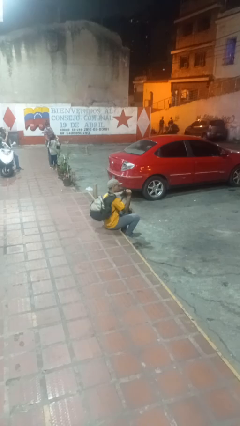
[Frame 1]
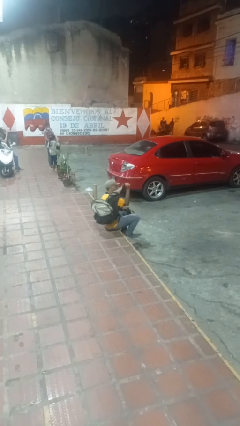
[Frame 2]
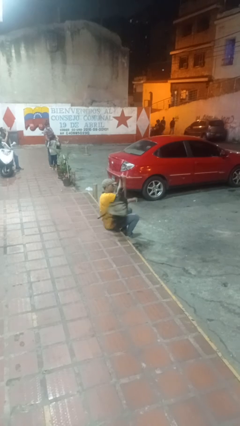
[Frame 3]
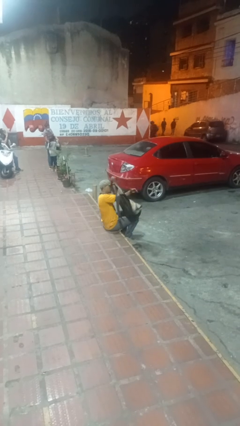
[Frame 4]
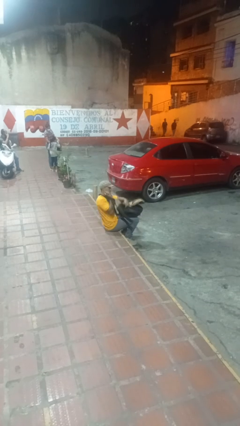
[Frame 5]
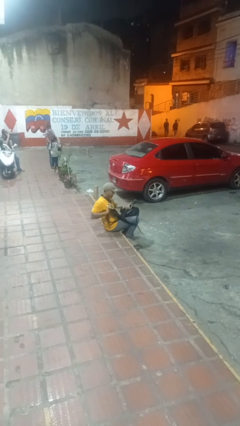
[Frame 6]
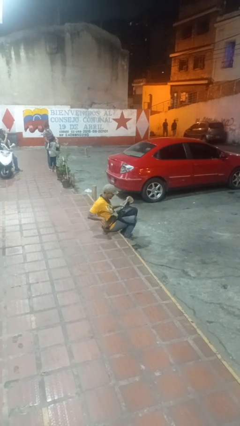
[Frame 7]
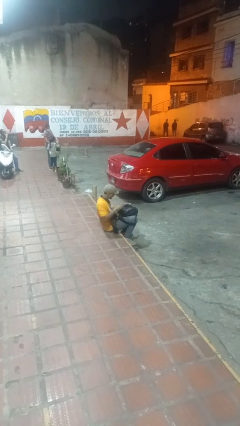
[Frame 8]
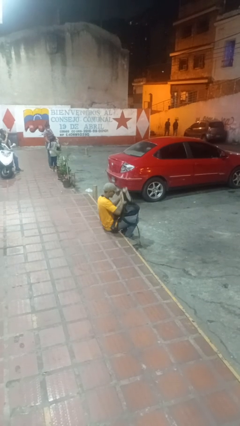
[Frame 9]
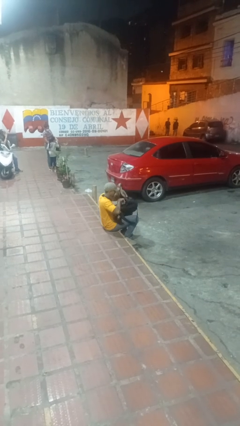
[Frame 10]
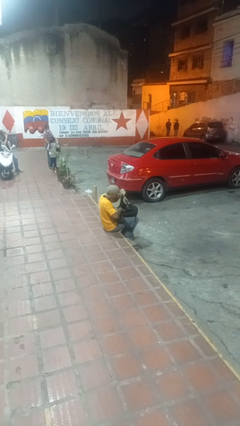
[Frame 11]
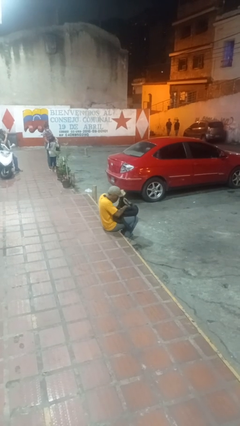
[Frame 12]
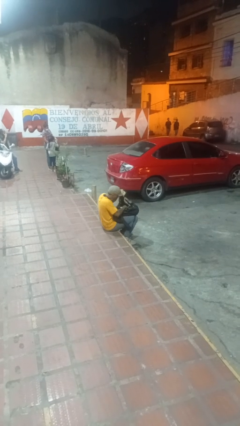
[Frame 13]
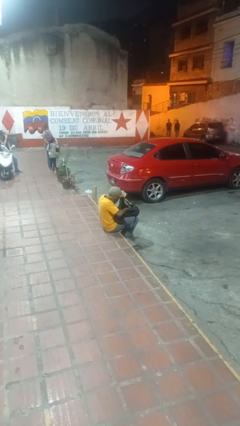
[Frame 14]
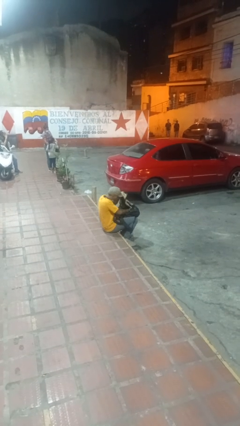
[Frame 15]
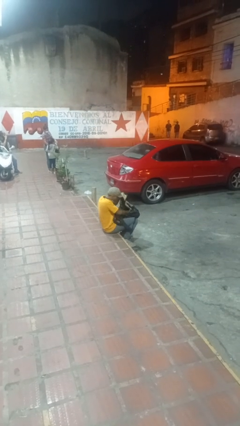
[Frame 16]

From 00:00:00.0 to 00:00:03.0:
person searches in backpack

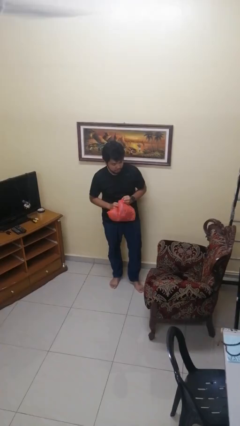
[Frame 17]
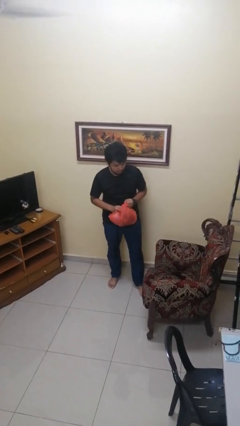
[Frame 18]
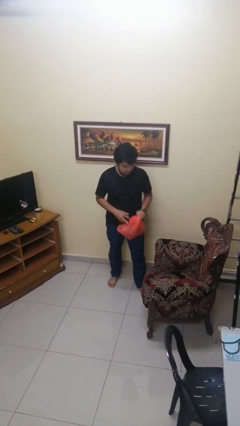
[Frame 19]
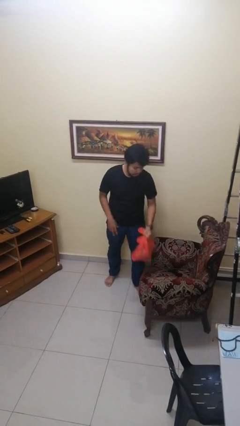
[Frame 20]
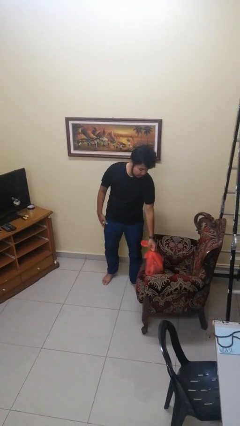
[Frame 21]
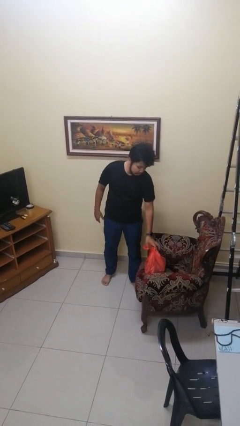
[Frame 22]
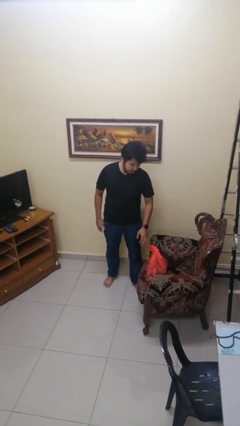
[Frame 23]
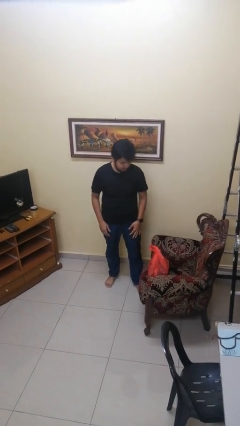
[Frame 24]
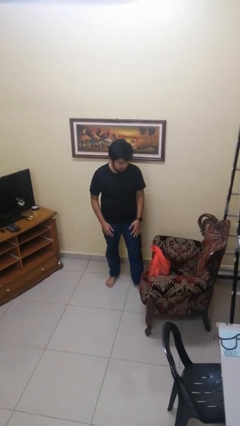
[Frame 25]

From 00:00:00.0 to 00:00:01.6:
person puts down object on couch

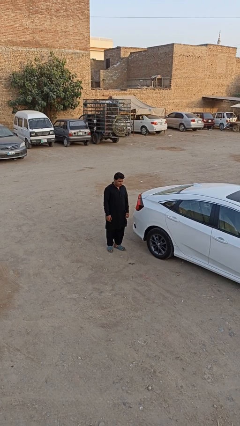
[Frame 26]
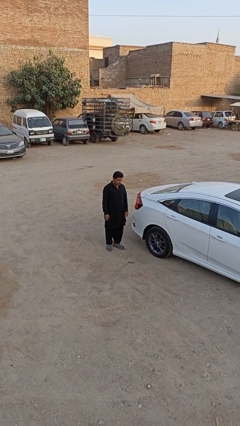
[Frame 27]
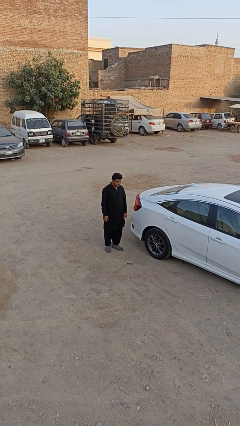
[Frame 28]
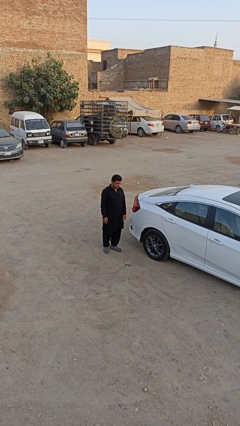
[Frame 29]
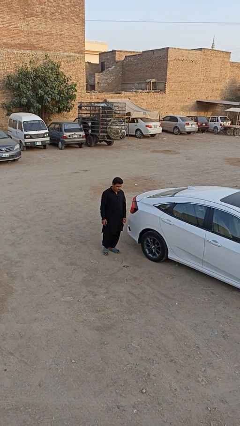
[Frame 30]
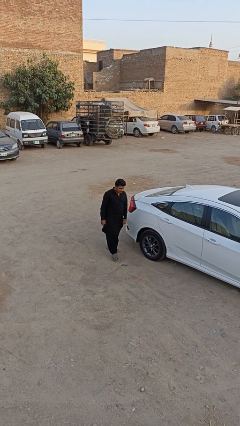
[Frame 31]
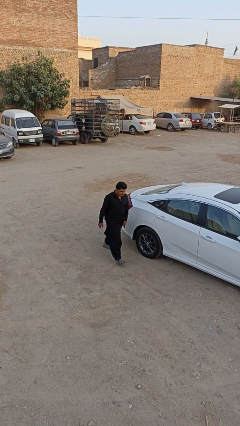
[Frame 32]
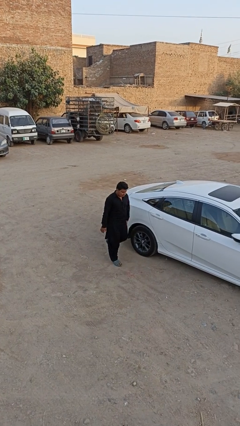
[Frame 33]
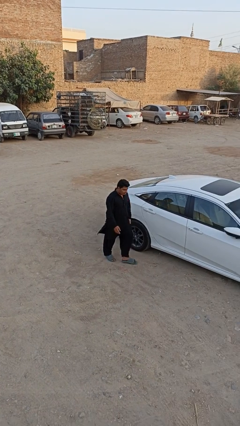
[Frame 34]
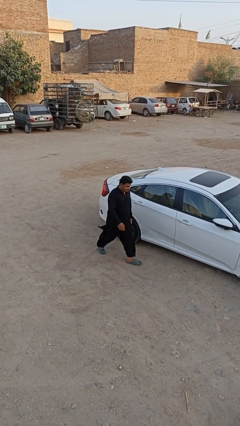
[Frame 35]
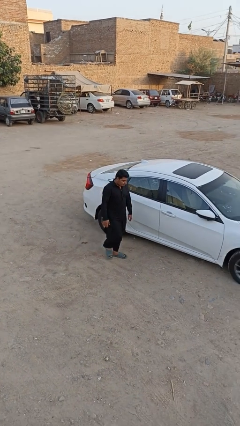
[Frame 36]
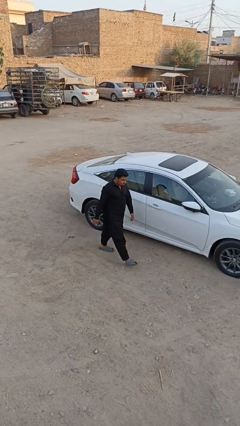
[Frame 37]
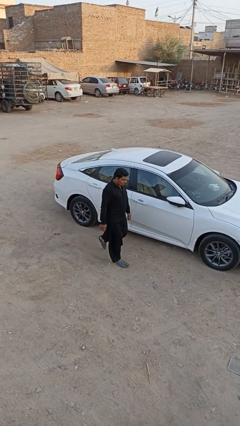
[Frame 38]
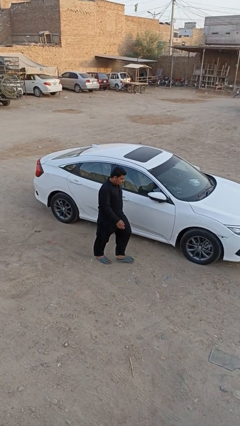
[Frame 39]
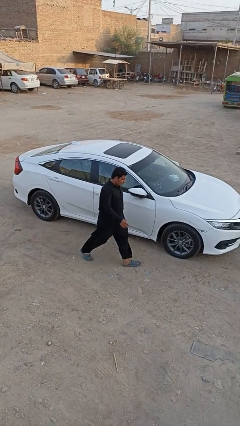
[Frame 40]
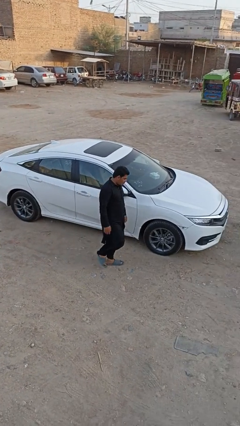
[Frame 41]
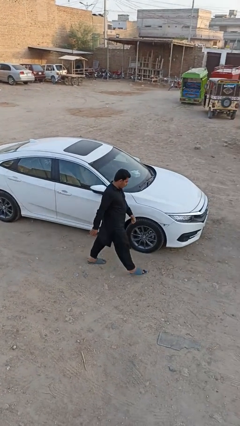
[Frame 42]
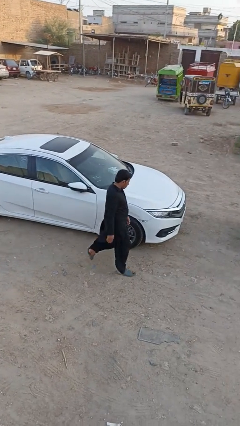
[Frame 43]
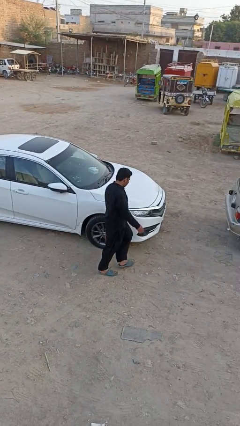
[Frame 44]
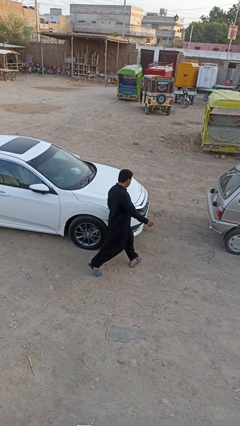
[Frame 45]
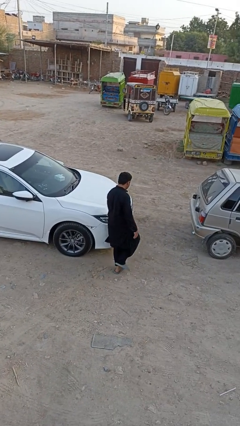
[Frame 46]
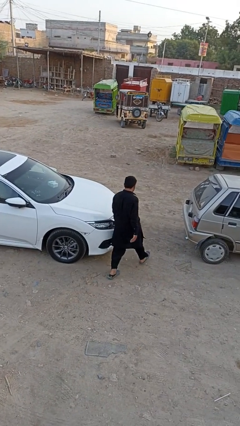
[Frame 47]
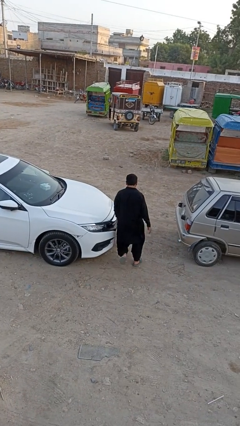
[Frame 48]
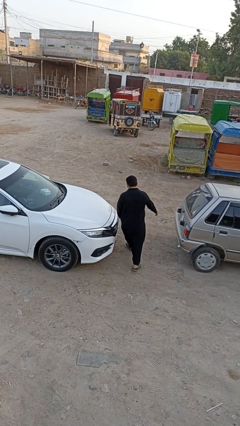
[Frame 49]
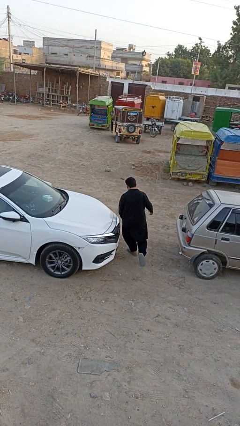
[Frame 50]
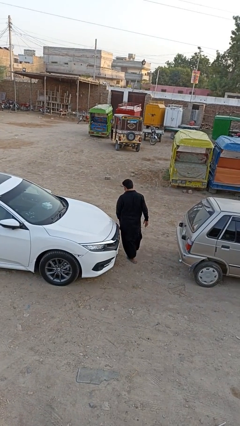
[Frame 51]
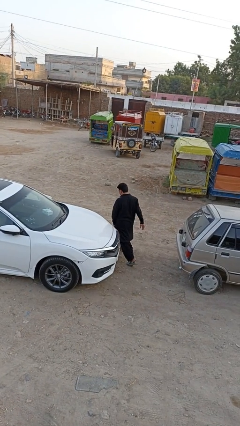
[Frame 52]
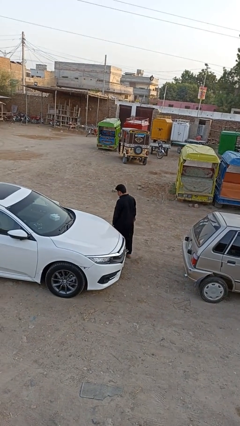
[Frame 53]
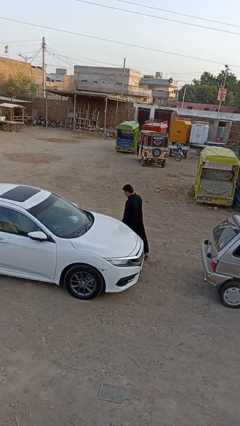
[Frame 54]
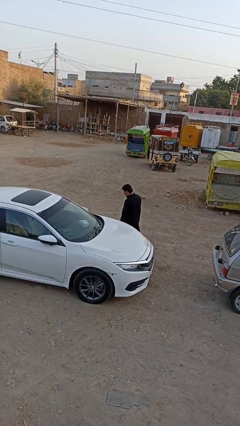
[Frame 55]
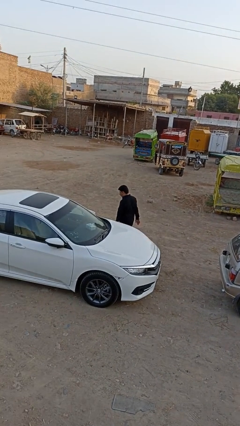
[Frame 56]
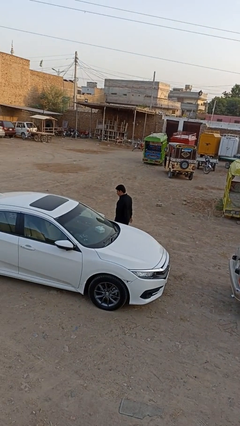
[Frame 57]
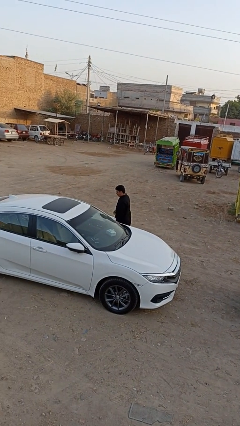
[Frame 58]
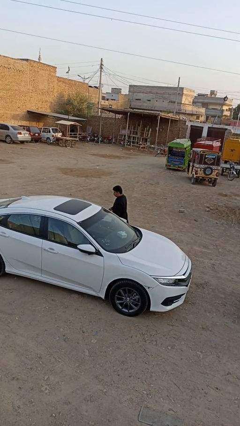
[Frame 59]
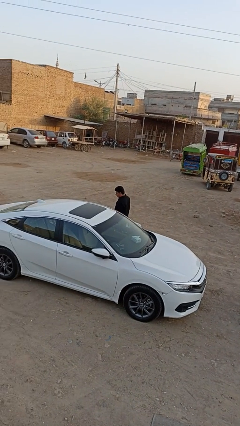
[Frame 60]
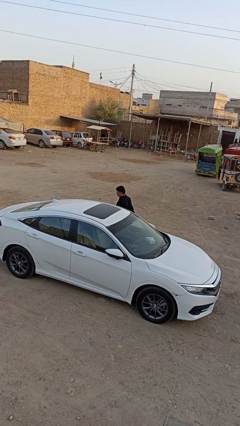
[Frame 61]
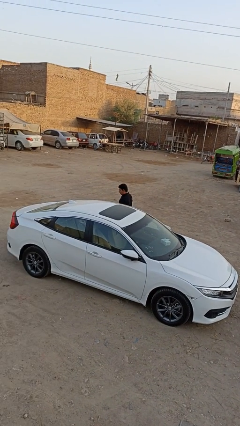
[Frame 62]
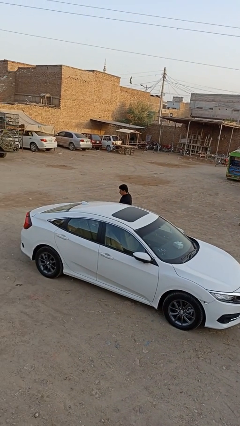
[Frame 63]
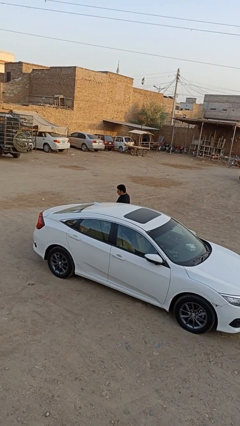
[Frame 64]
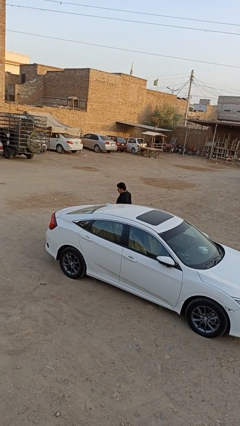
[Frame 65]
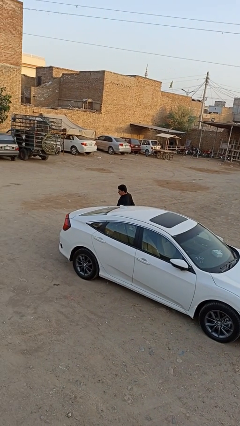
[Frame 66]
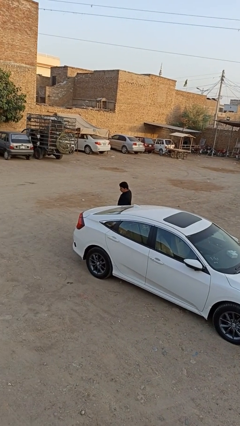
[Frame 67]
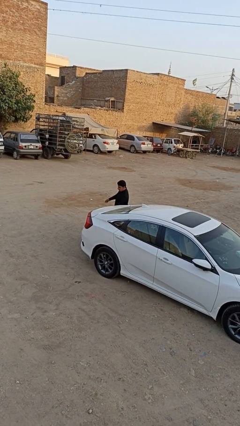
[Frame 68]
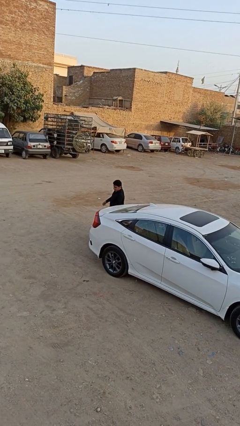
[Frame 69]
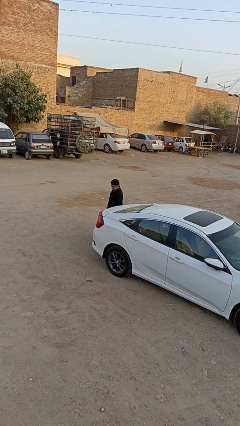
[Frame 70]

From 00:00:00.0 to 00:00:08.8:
person walks around car

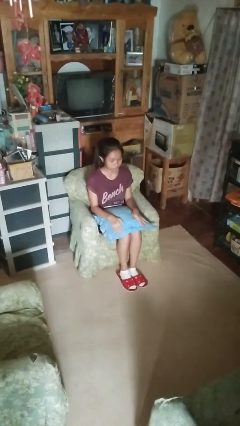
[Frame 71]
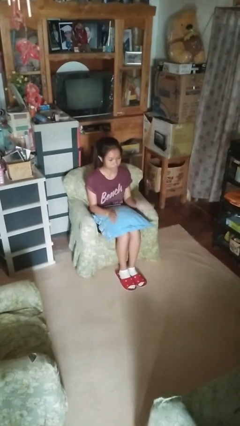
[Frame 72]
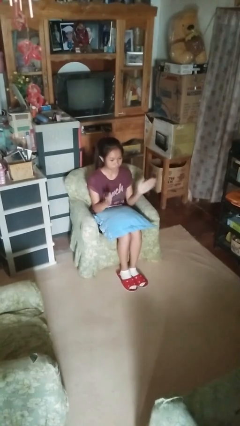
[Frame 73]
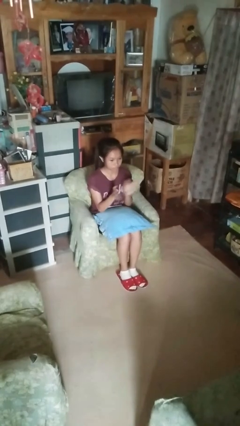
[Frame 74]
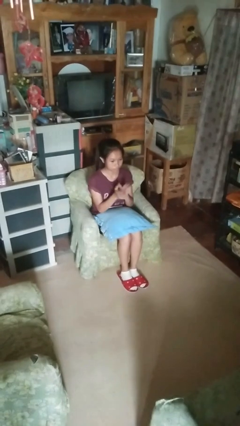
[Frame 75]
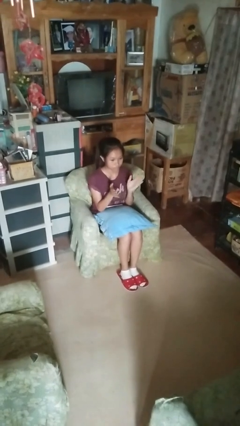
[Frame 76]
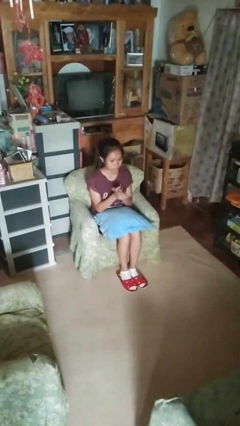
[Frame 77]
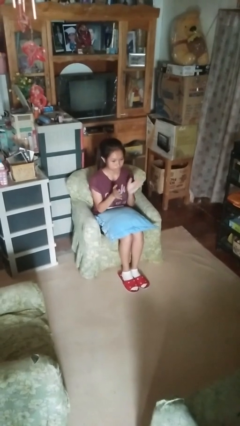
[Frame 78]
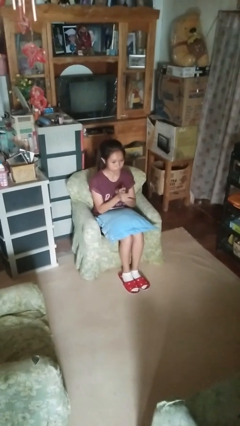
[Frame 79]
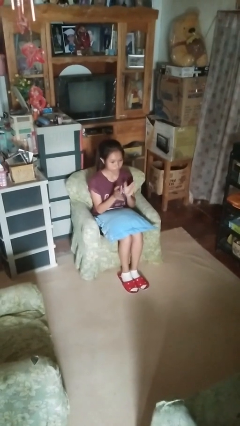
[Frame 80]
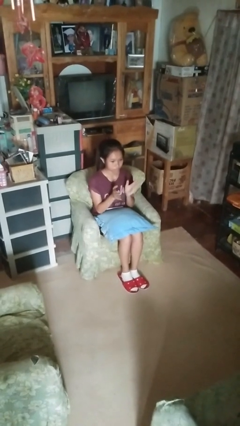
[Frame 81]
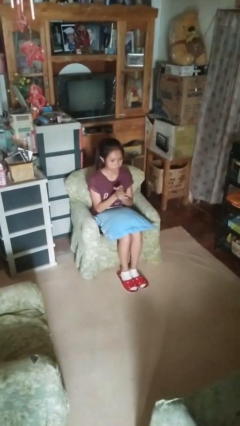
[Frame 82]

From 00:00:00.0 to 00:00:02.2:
person claps hands

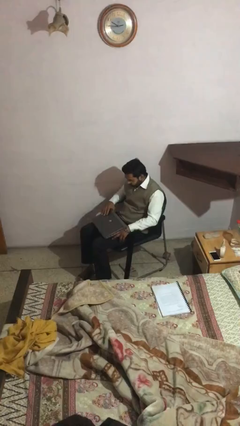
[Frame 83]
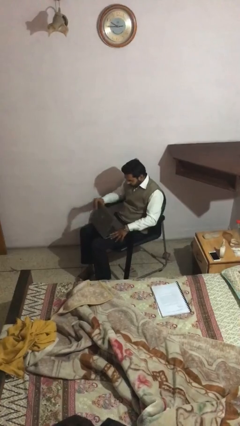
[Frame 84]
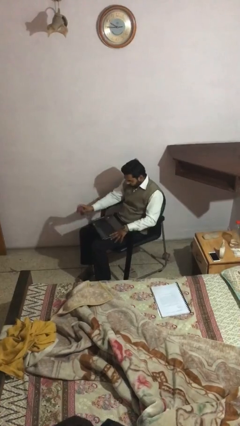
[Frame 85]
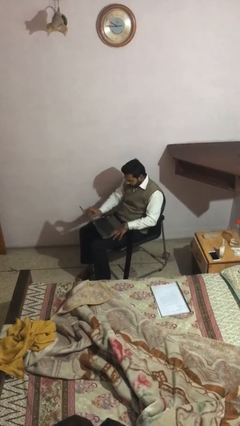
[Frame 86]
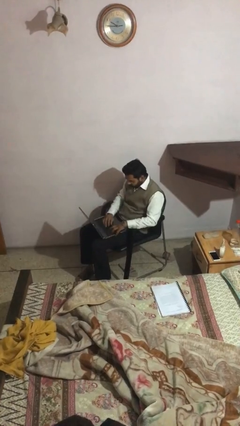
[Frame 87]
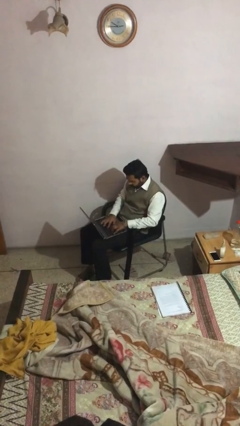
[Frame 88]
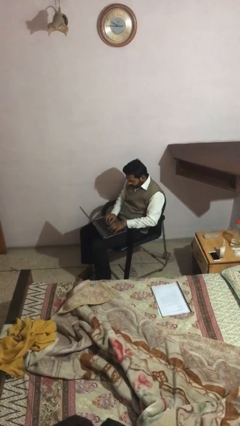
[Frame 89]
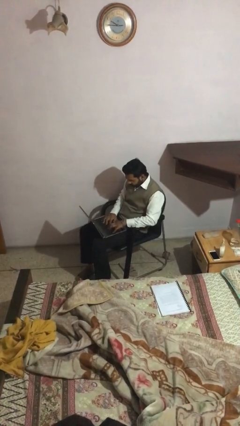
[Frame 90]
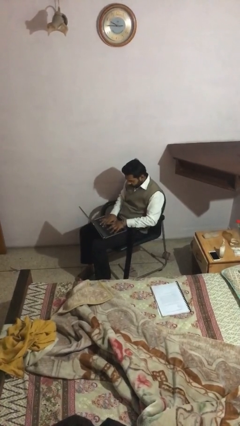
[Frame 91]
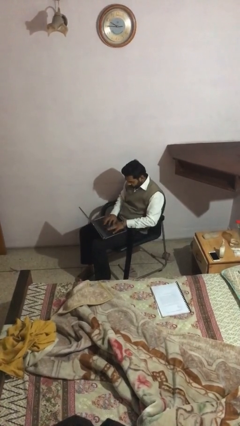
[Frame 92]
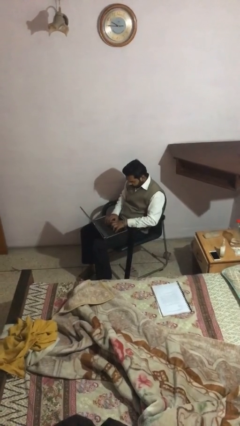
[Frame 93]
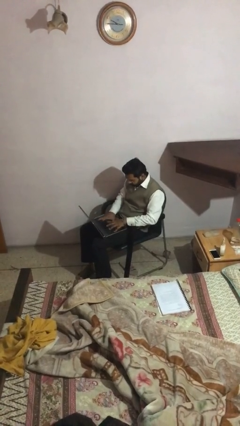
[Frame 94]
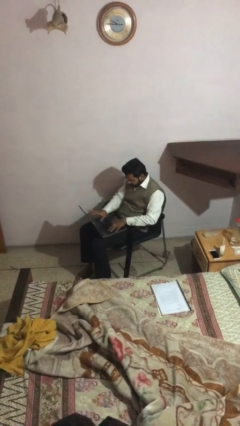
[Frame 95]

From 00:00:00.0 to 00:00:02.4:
person interacts with laptop
